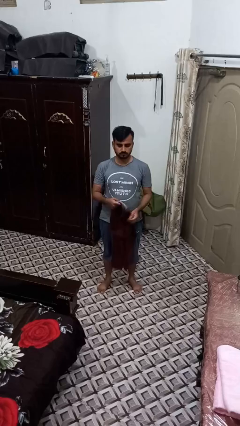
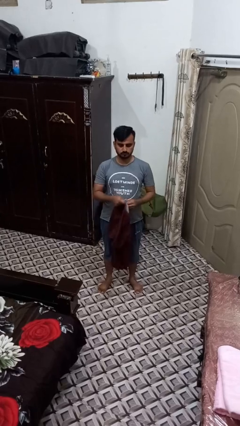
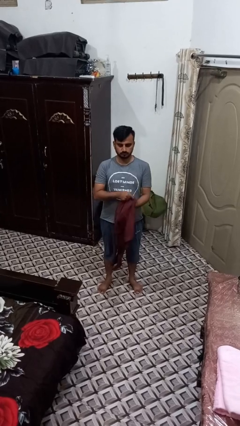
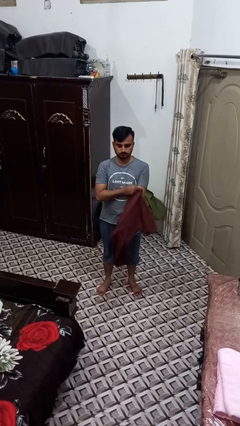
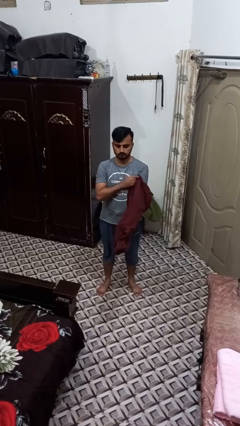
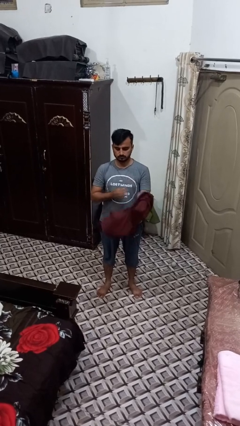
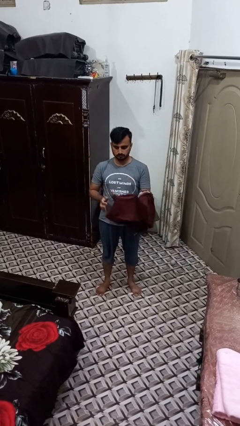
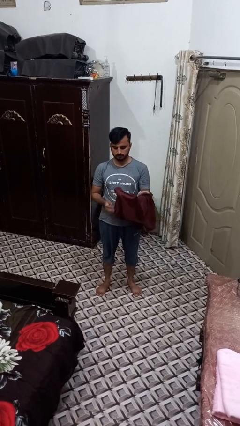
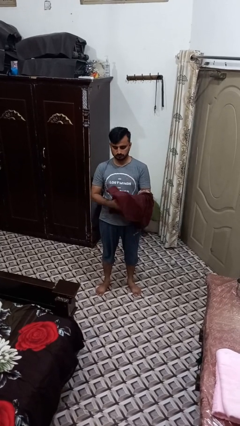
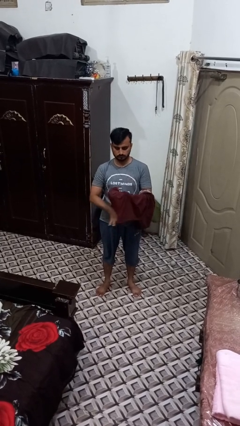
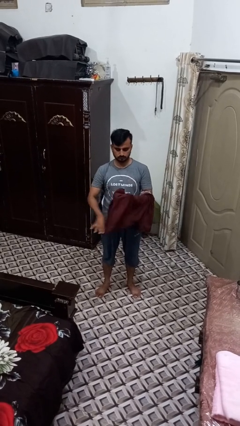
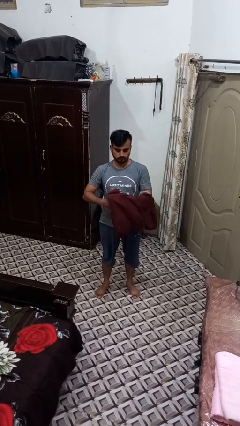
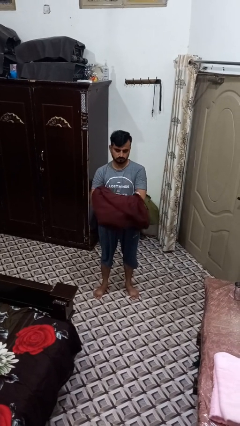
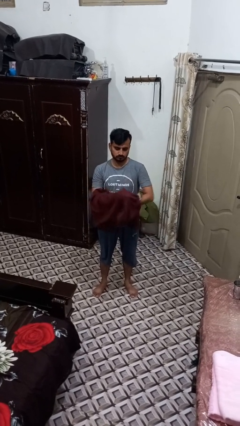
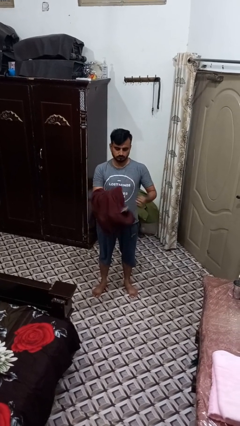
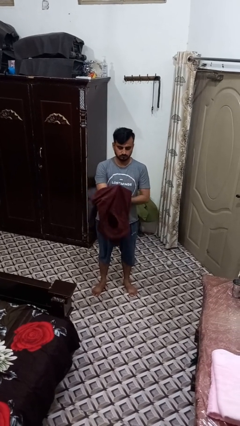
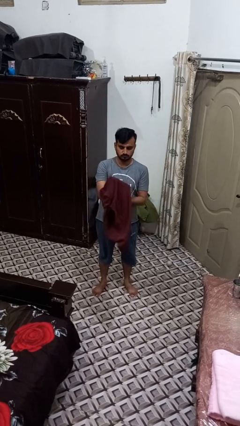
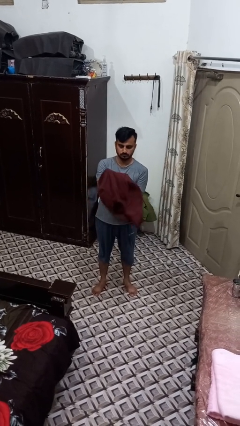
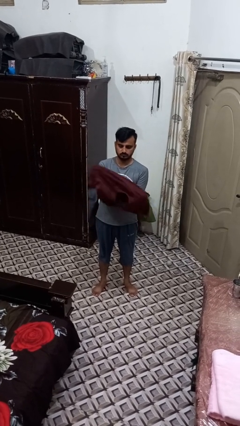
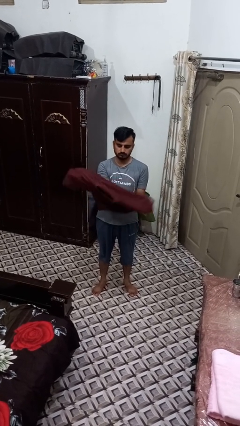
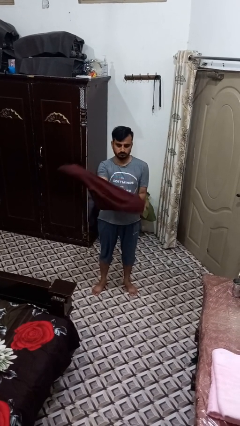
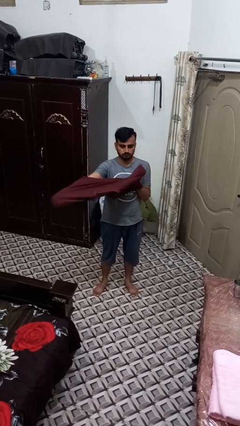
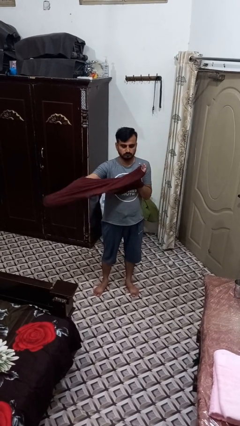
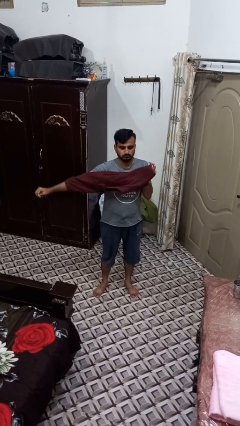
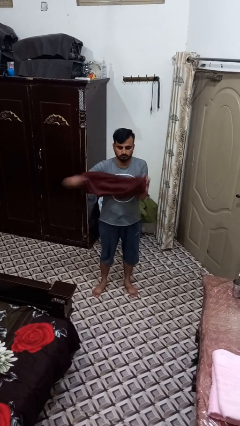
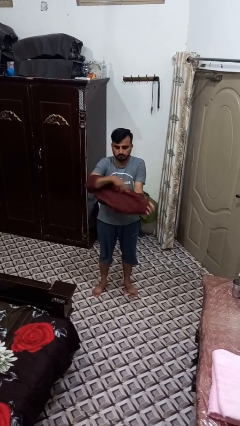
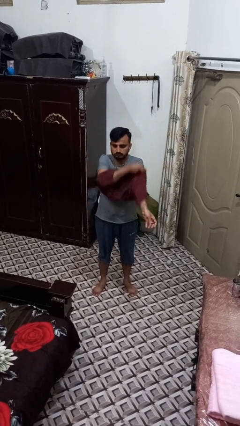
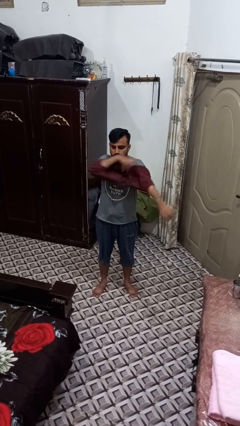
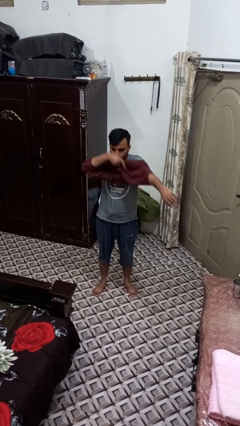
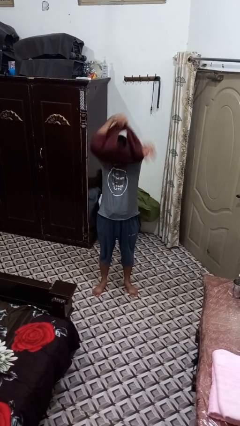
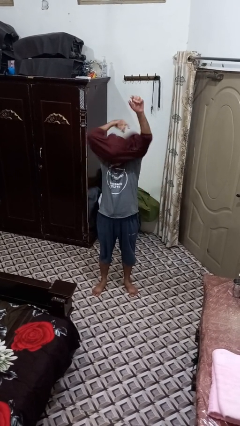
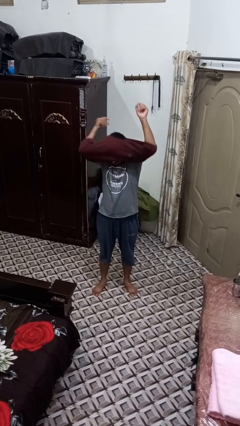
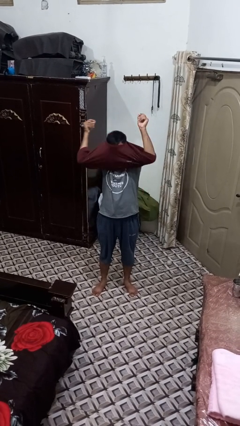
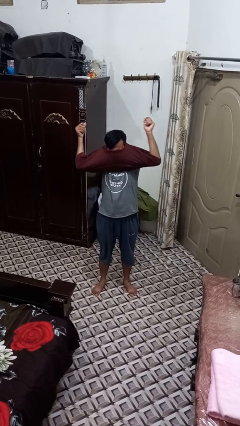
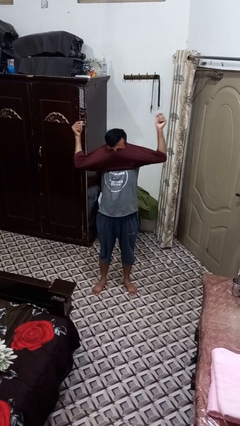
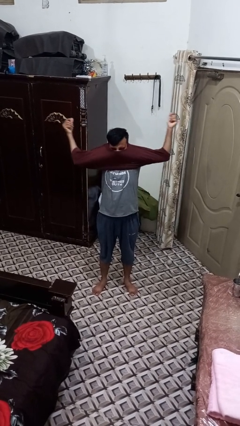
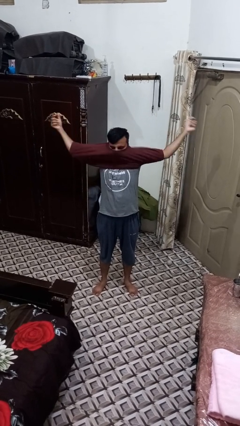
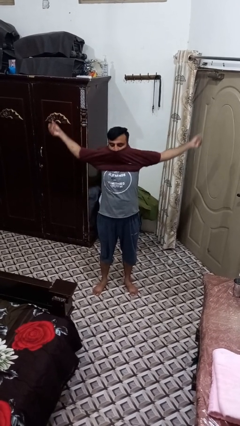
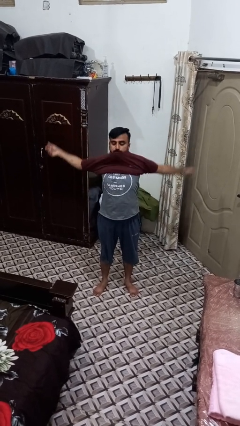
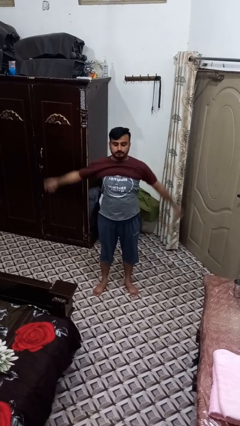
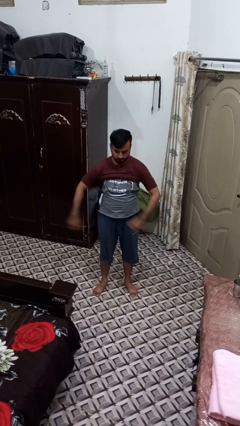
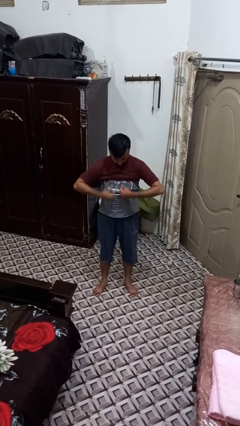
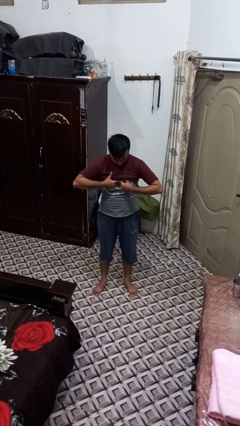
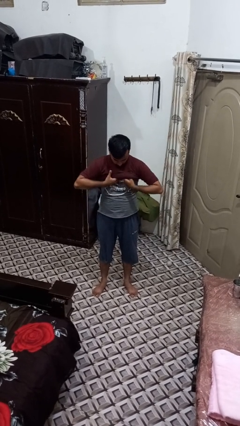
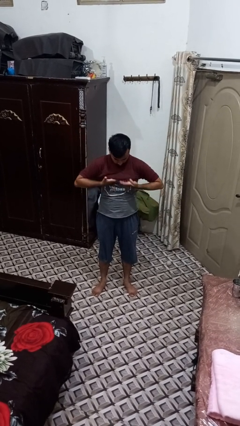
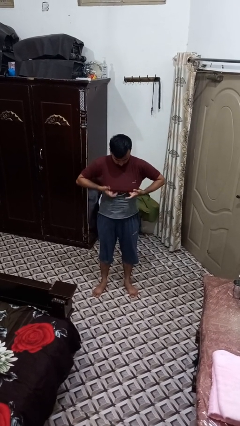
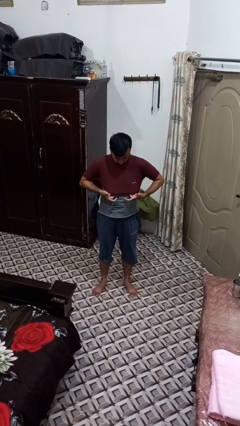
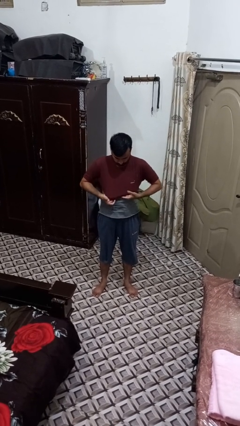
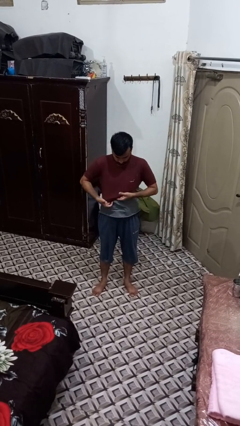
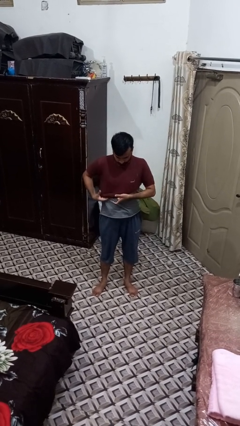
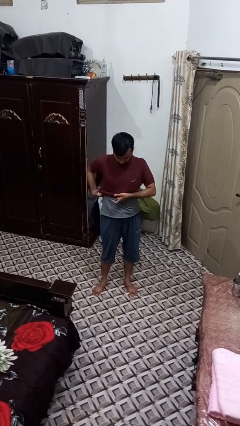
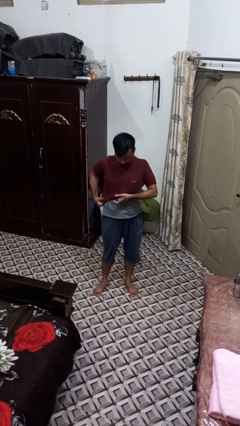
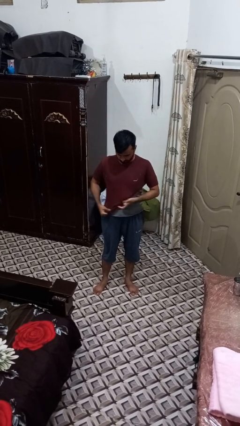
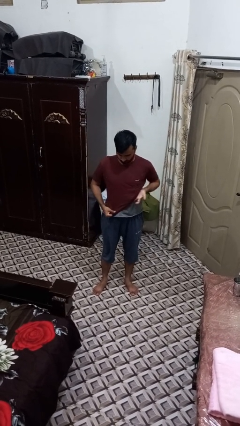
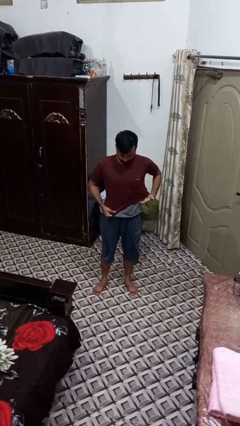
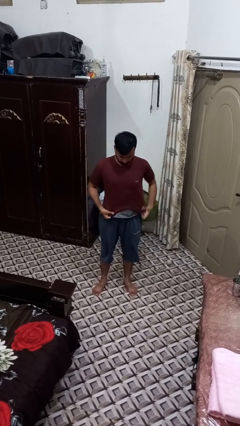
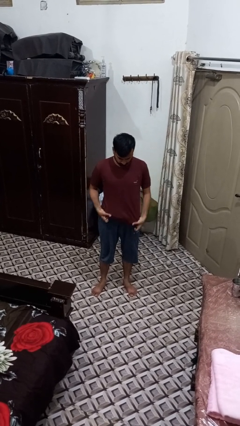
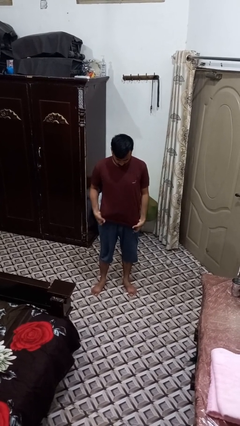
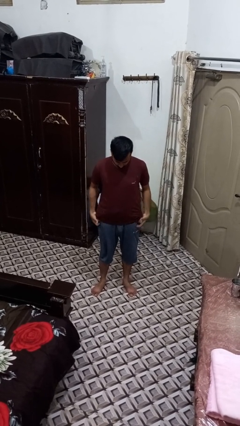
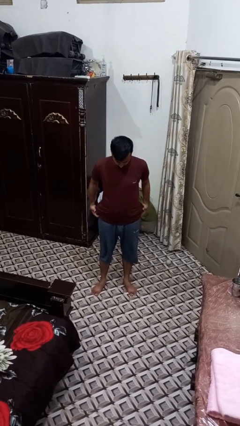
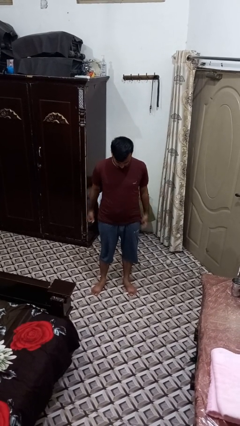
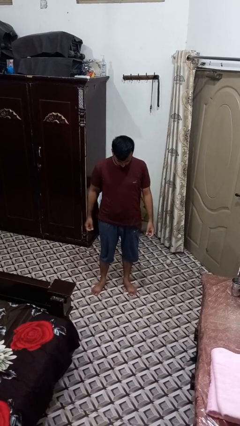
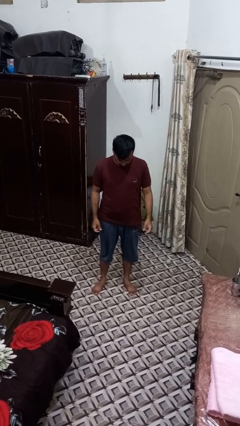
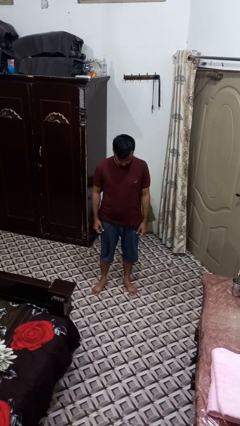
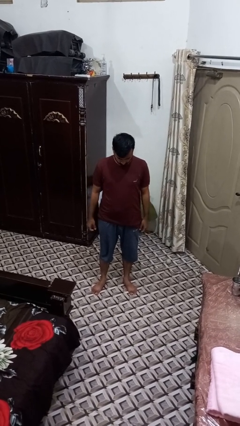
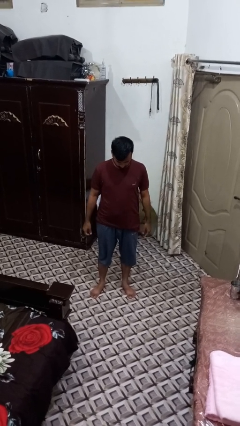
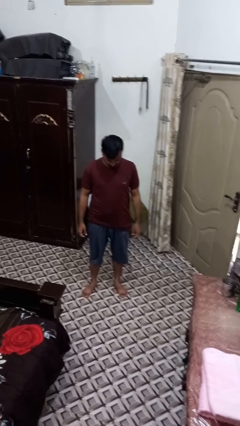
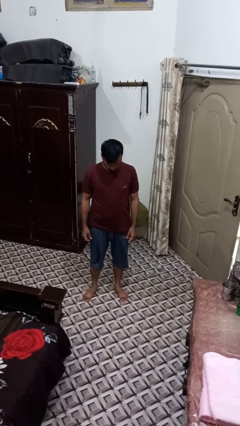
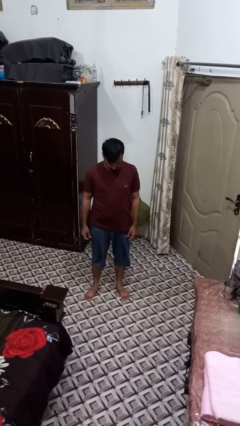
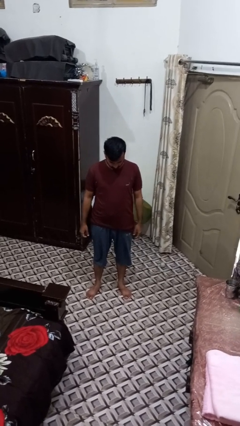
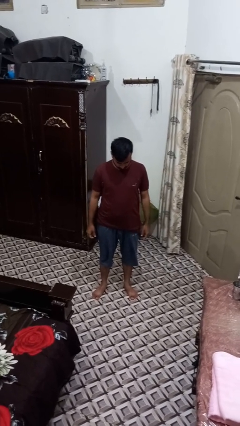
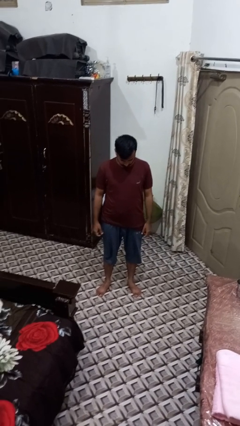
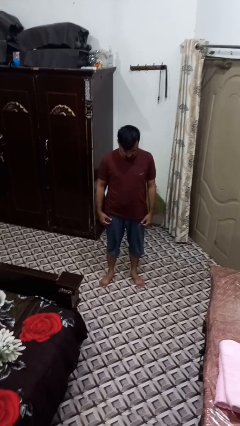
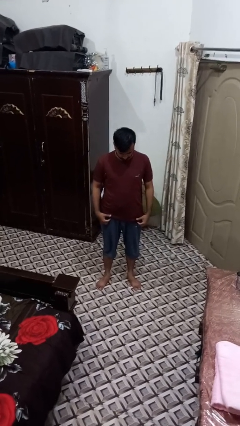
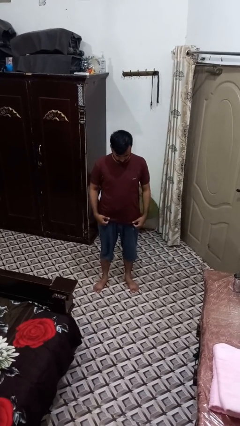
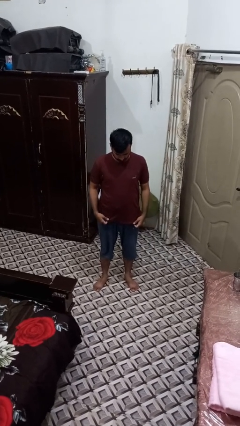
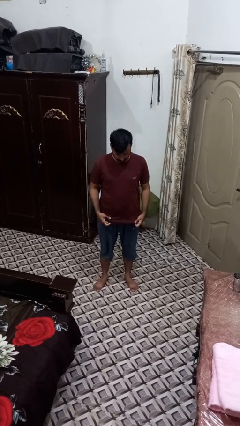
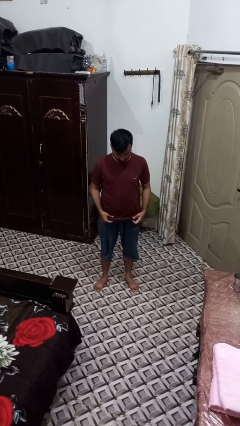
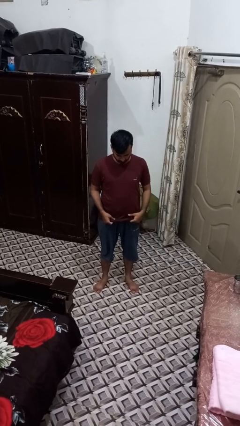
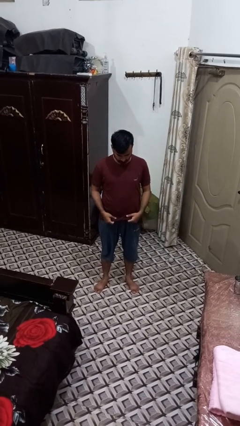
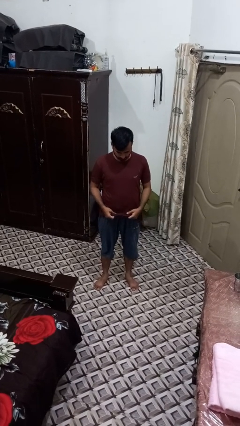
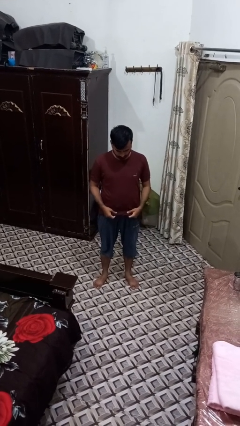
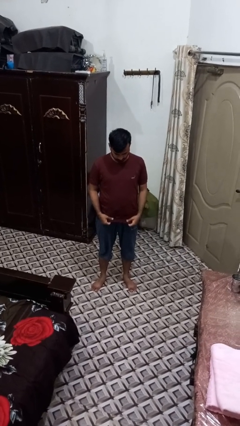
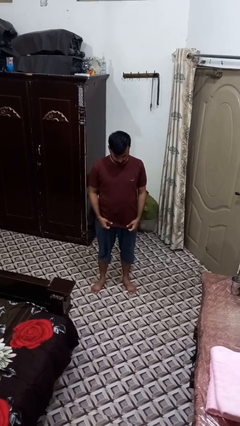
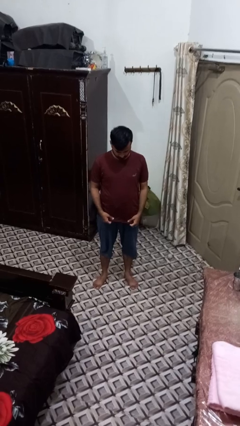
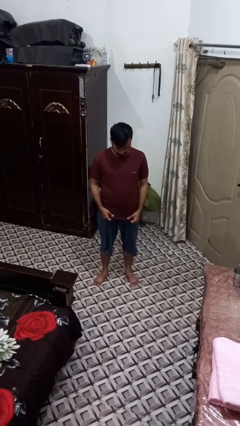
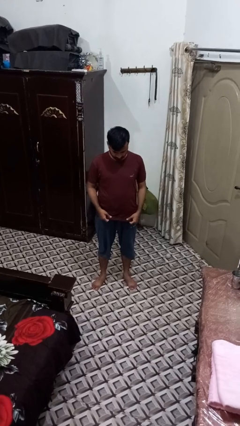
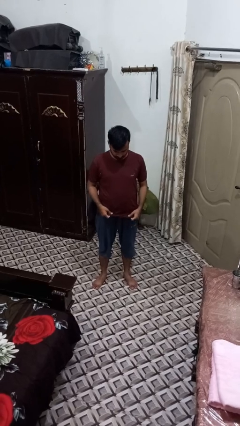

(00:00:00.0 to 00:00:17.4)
person puts on shirt

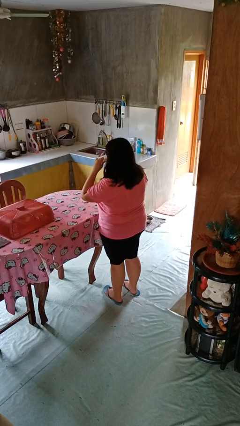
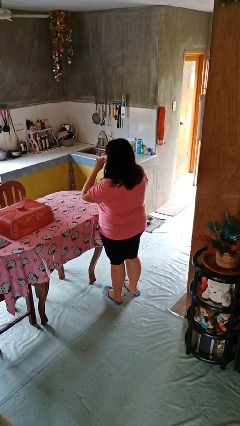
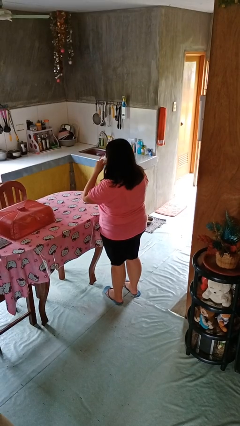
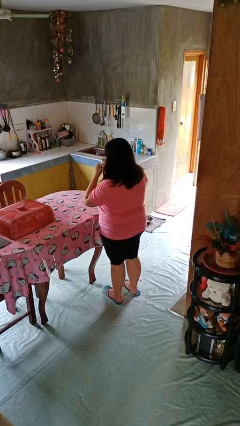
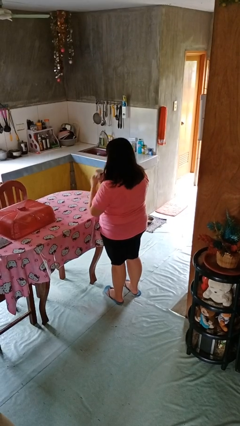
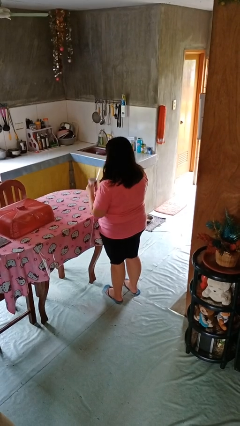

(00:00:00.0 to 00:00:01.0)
person drinks from mug
